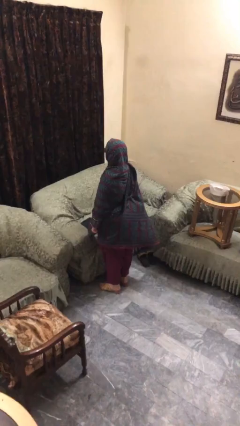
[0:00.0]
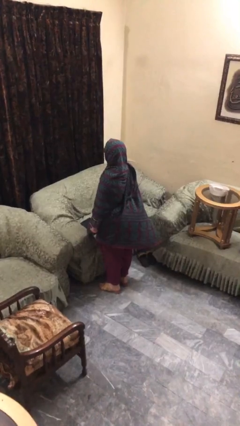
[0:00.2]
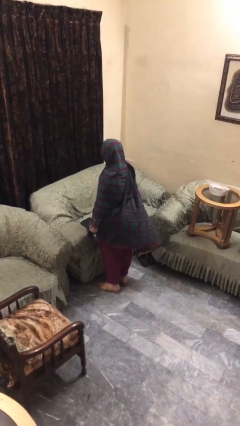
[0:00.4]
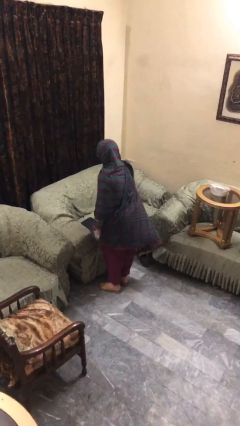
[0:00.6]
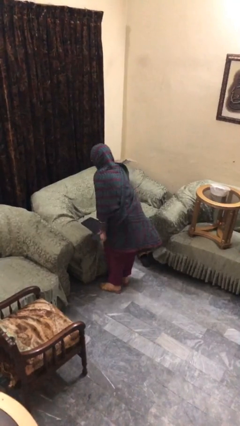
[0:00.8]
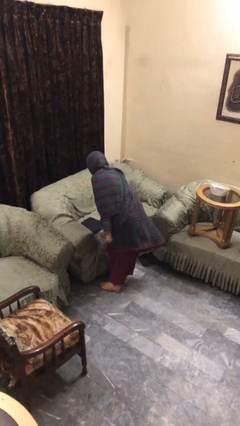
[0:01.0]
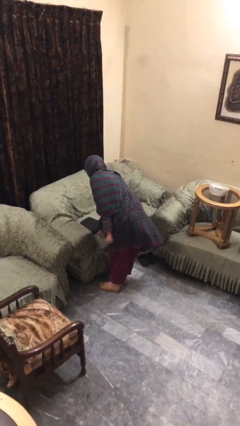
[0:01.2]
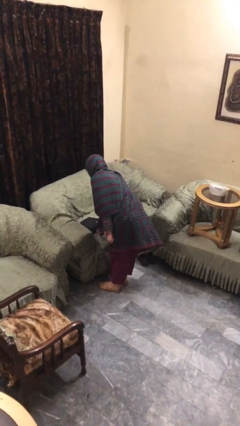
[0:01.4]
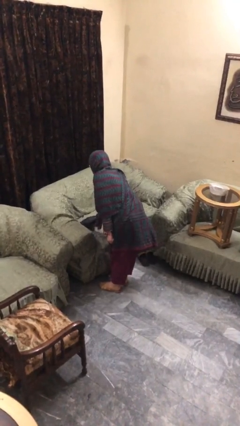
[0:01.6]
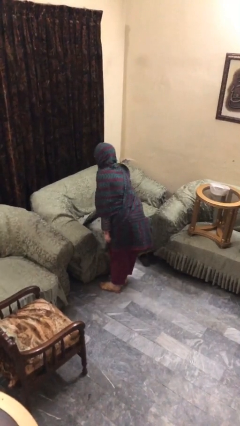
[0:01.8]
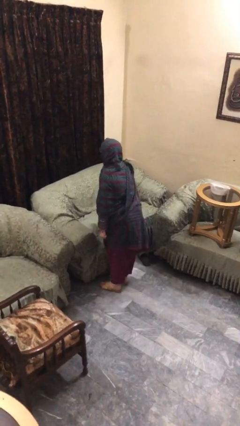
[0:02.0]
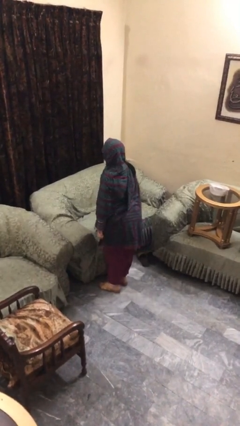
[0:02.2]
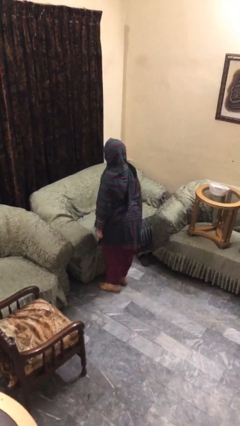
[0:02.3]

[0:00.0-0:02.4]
person picks up object from couch

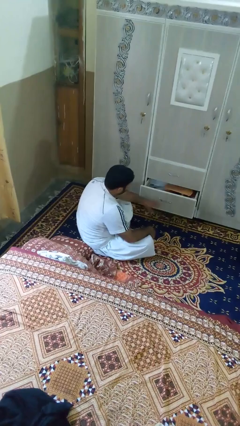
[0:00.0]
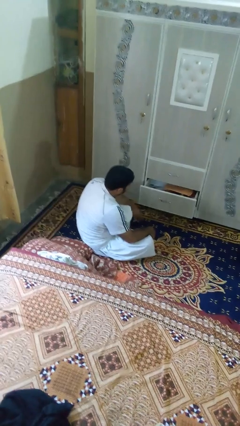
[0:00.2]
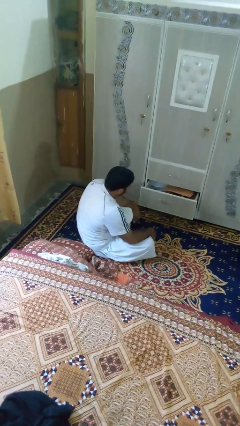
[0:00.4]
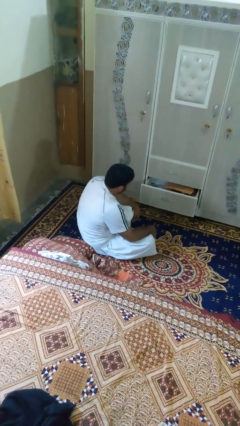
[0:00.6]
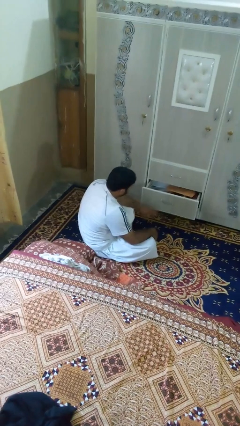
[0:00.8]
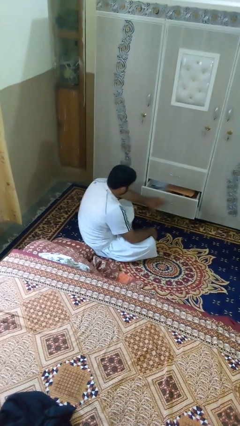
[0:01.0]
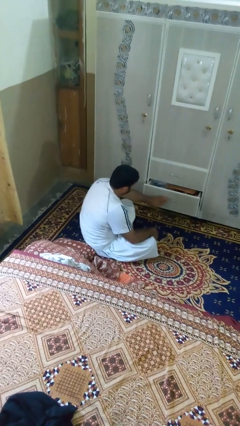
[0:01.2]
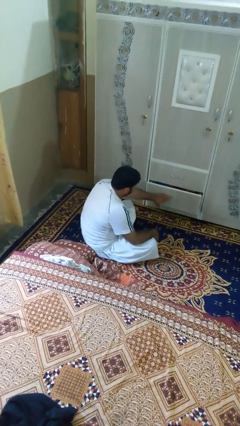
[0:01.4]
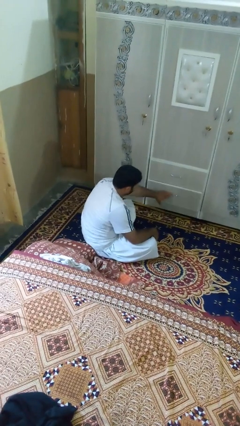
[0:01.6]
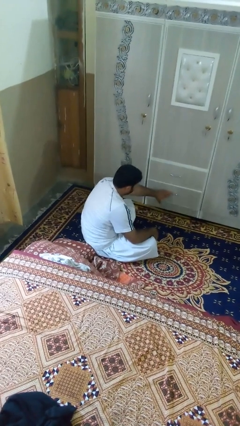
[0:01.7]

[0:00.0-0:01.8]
person closes dresser drawer

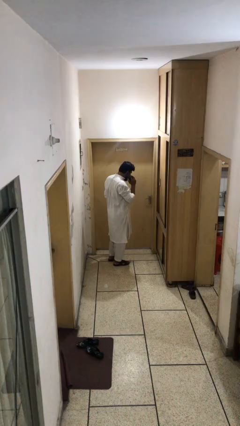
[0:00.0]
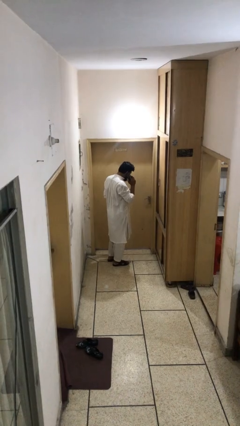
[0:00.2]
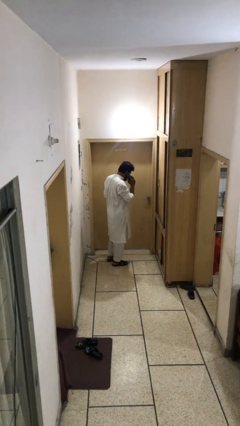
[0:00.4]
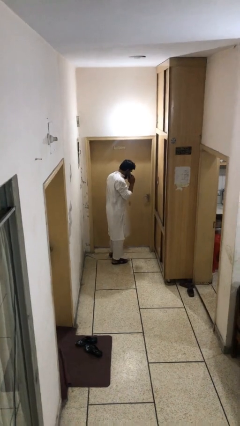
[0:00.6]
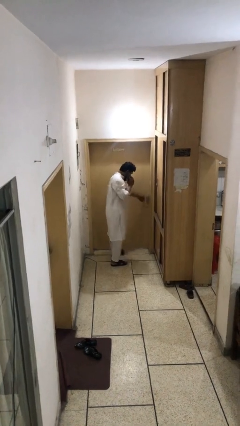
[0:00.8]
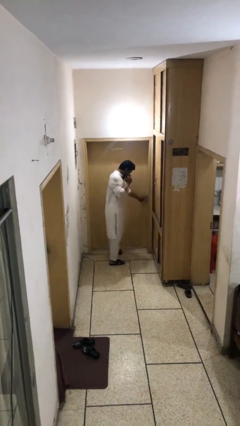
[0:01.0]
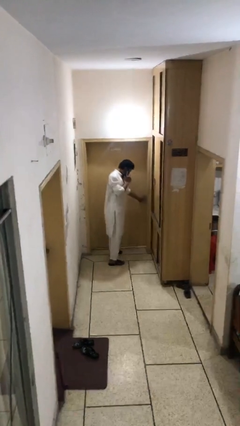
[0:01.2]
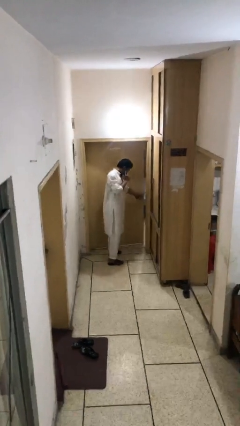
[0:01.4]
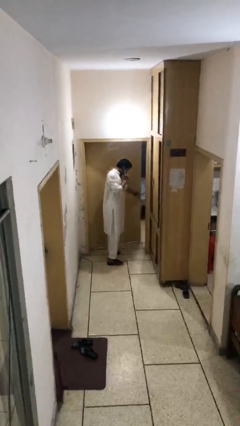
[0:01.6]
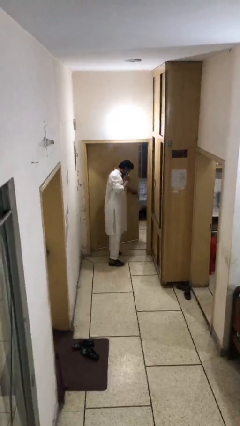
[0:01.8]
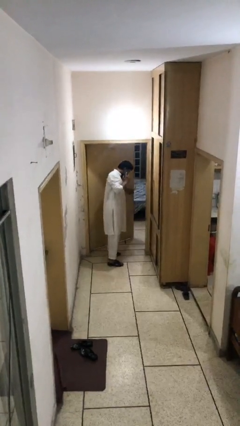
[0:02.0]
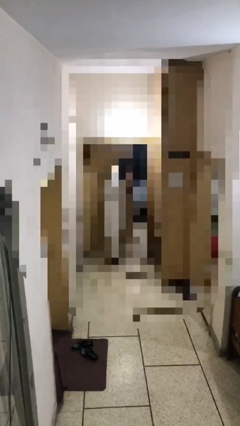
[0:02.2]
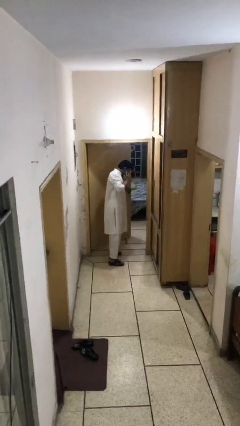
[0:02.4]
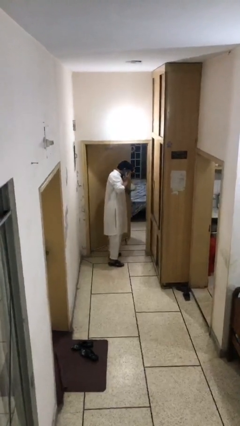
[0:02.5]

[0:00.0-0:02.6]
person opens facility door

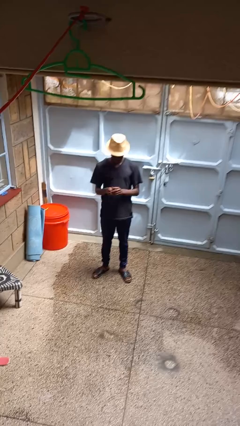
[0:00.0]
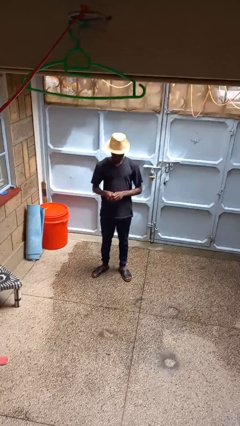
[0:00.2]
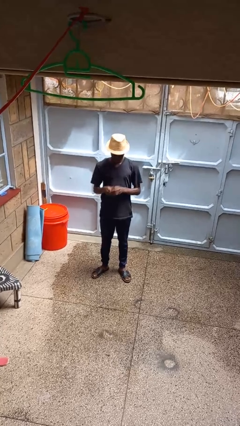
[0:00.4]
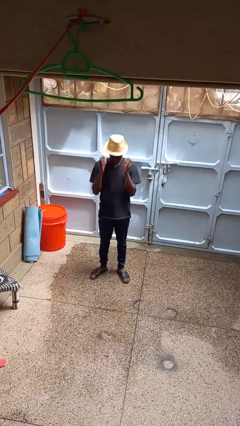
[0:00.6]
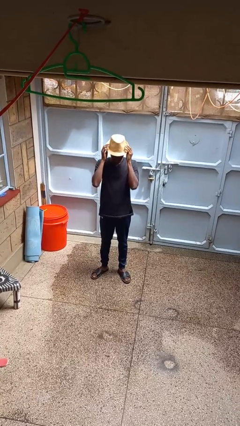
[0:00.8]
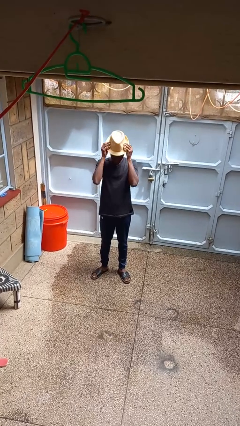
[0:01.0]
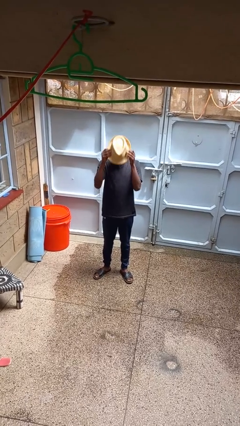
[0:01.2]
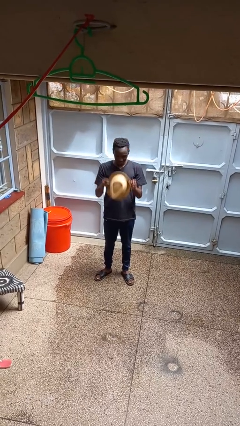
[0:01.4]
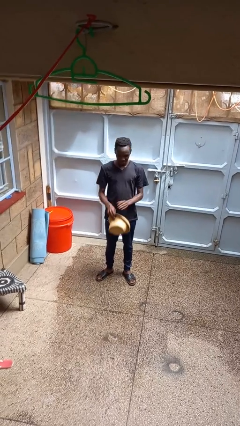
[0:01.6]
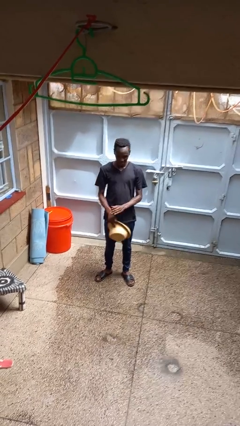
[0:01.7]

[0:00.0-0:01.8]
person takes off hat

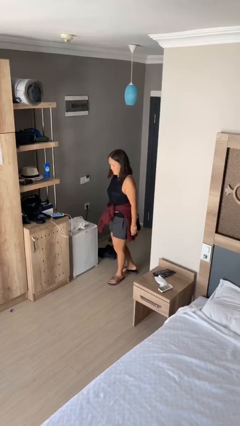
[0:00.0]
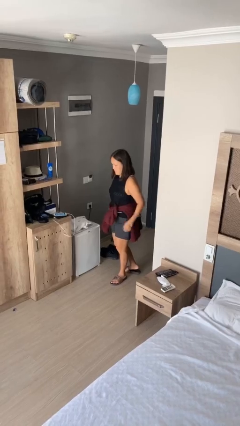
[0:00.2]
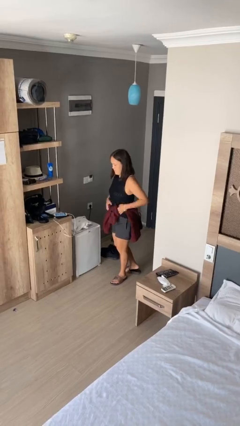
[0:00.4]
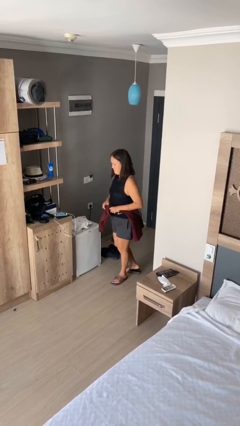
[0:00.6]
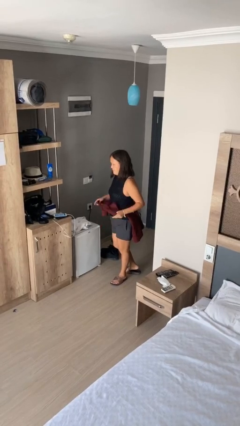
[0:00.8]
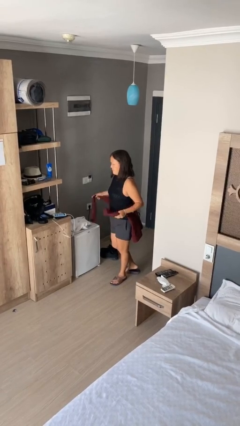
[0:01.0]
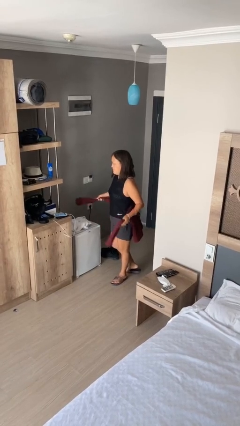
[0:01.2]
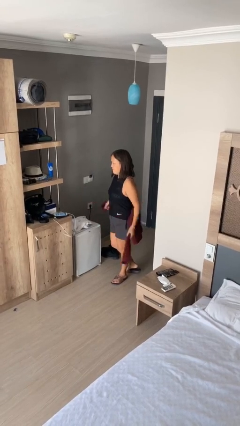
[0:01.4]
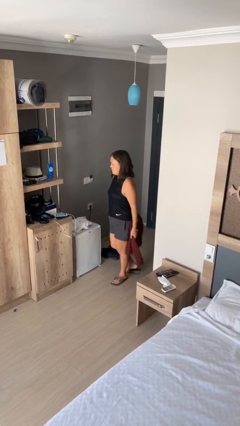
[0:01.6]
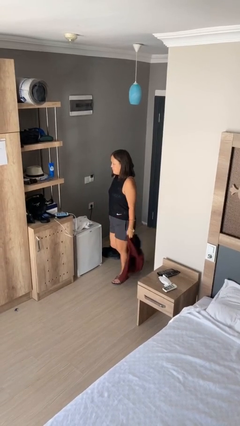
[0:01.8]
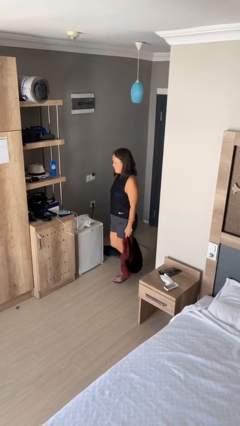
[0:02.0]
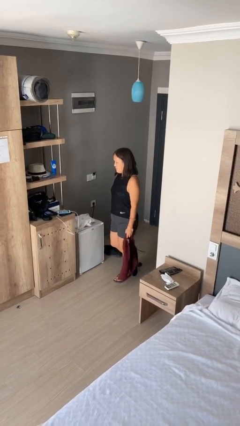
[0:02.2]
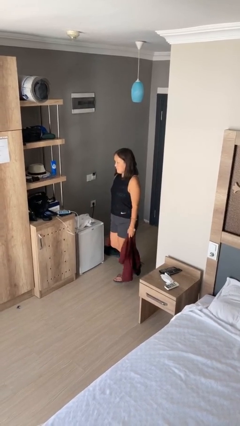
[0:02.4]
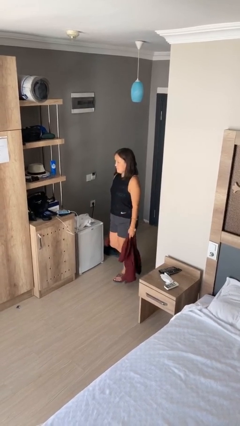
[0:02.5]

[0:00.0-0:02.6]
person unties jacket around waist

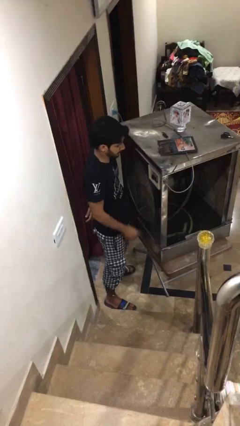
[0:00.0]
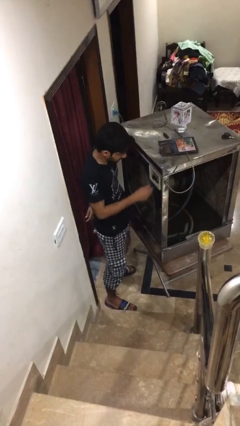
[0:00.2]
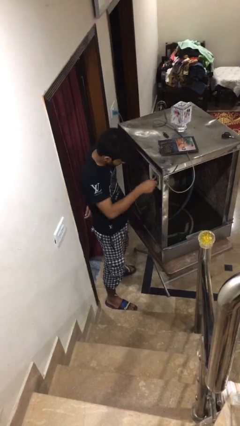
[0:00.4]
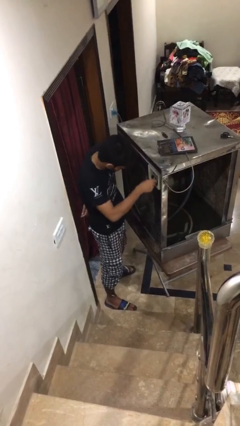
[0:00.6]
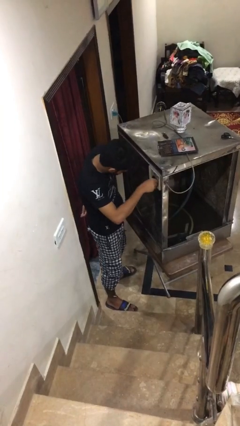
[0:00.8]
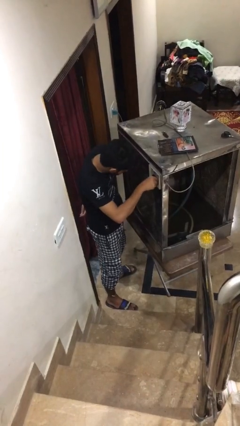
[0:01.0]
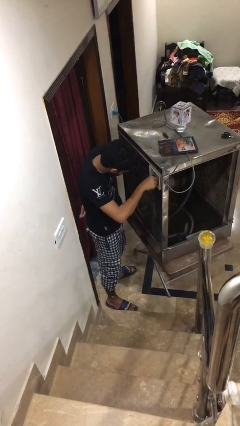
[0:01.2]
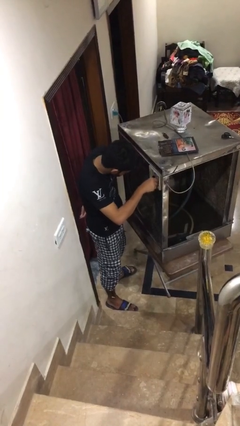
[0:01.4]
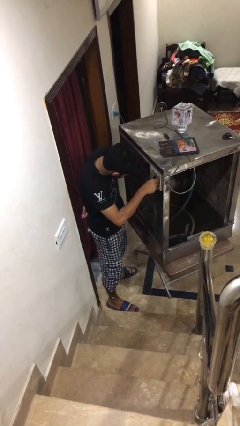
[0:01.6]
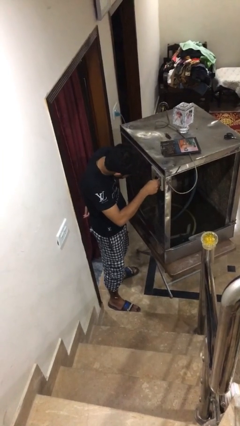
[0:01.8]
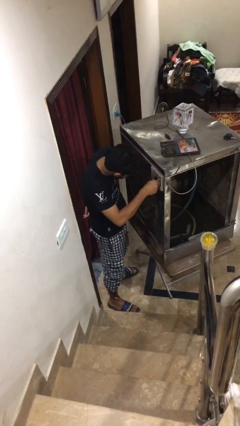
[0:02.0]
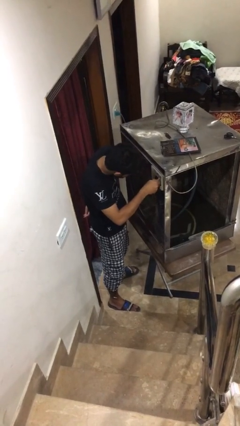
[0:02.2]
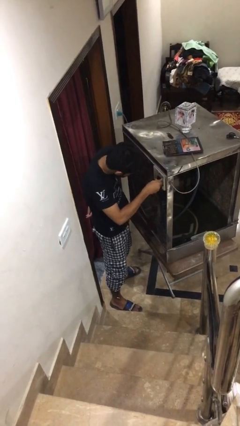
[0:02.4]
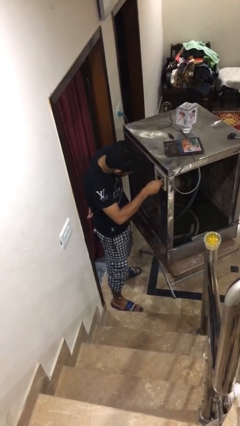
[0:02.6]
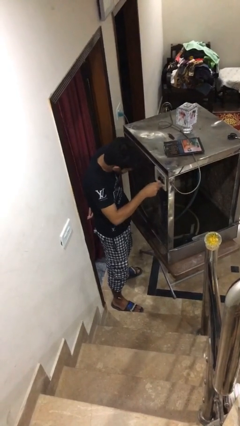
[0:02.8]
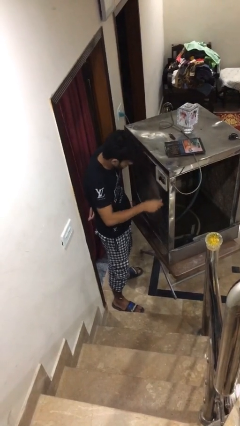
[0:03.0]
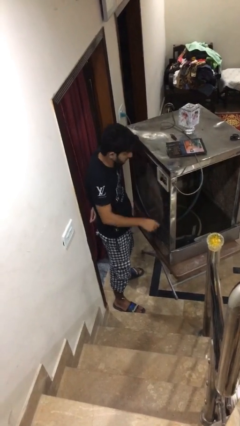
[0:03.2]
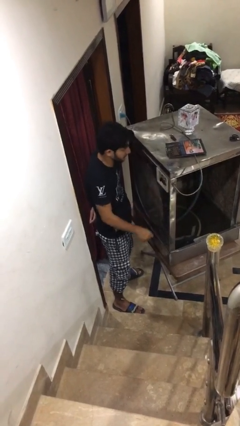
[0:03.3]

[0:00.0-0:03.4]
person adjusts thermostat

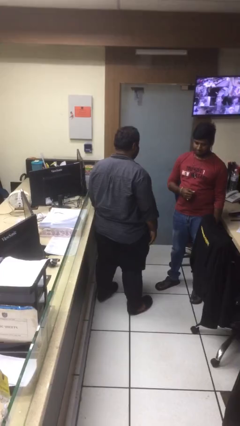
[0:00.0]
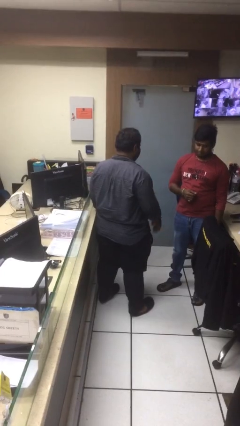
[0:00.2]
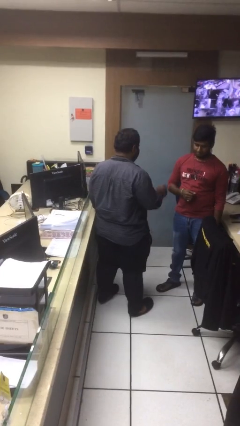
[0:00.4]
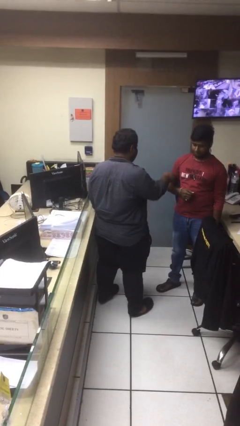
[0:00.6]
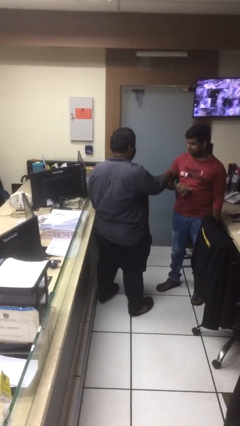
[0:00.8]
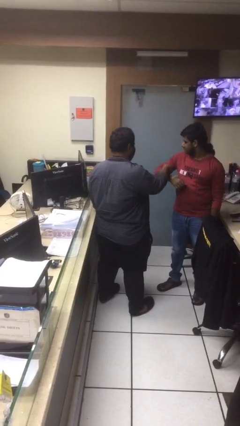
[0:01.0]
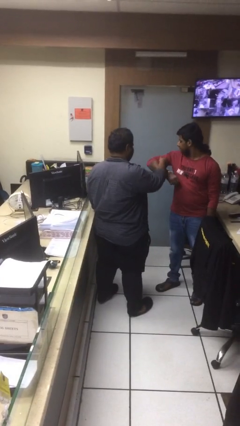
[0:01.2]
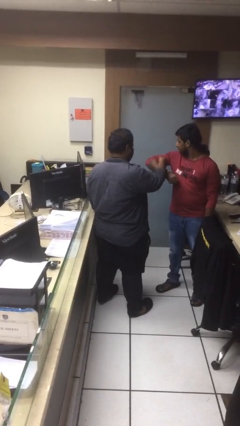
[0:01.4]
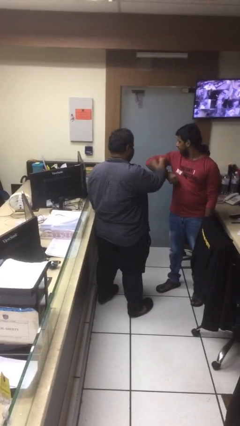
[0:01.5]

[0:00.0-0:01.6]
person grabs person by bicep

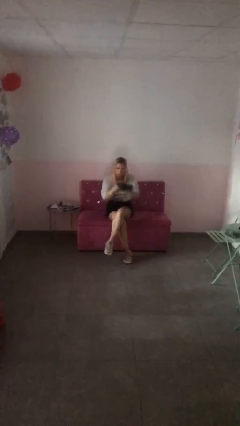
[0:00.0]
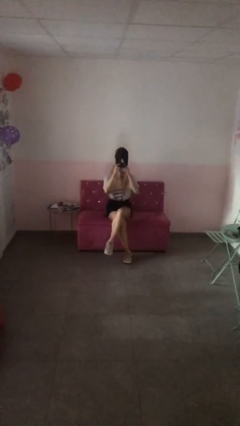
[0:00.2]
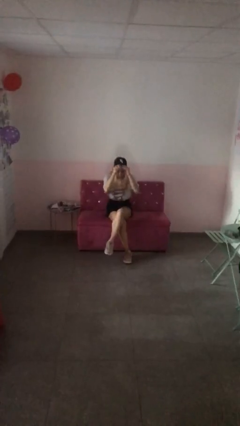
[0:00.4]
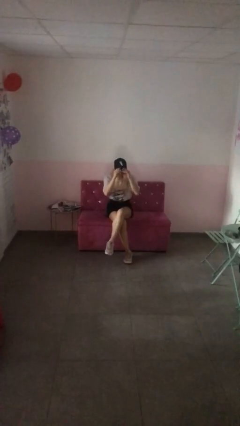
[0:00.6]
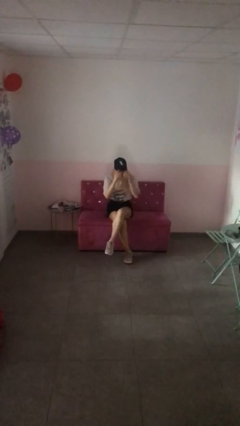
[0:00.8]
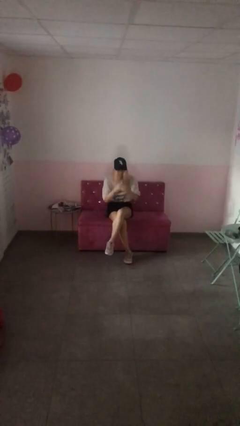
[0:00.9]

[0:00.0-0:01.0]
person puts on hat
